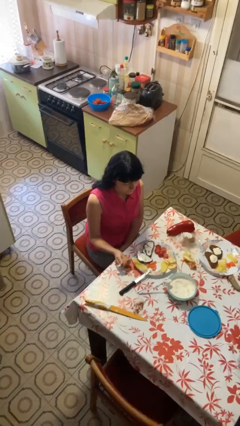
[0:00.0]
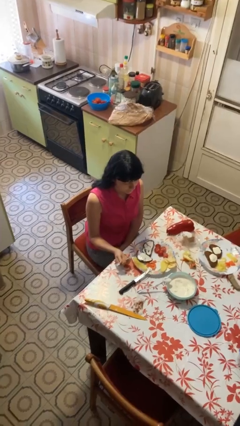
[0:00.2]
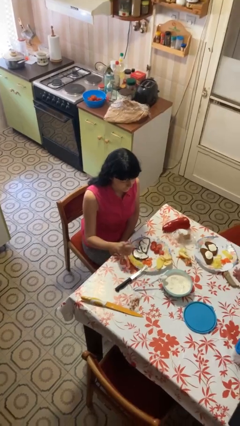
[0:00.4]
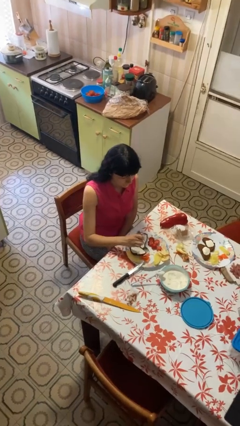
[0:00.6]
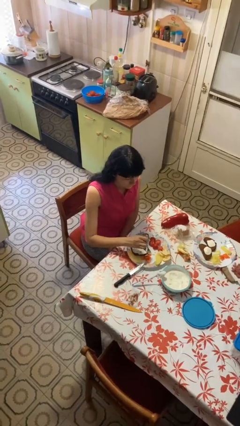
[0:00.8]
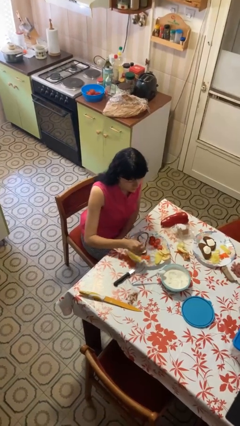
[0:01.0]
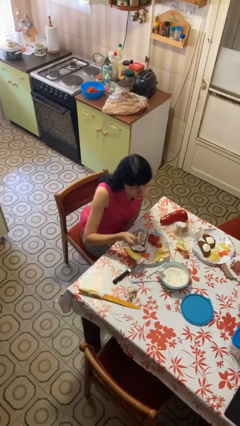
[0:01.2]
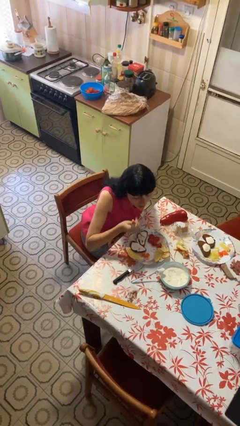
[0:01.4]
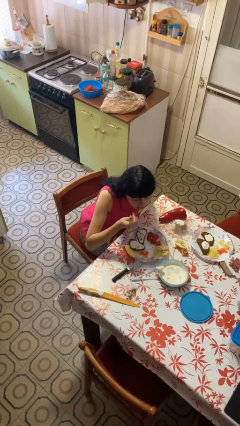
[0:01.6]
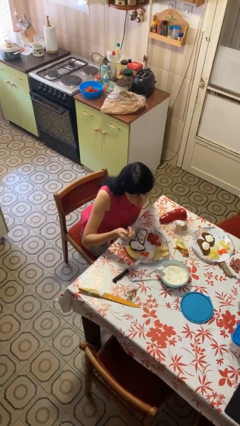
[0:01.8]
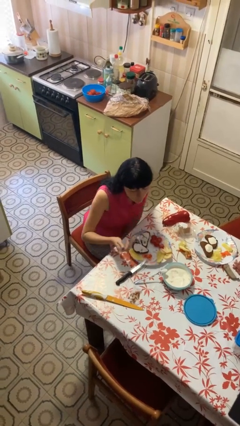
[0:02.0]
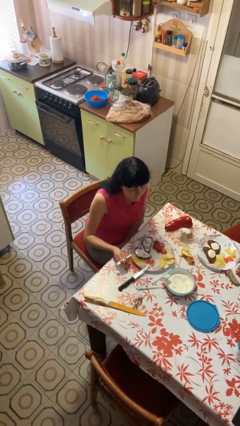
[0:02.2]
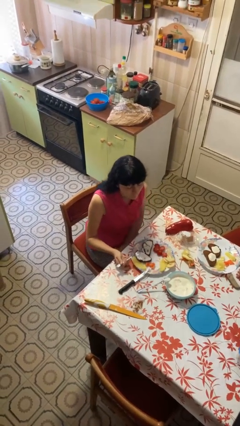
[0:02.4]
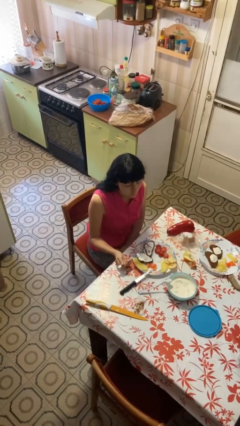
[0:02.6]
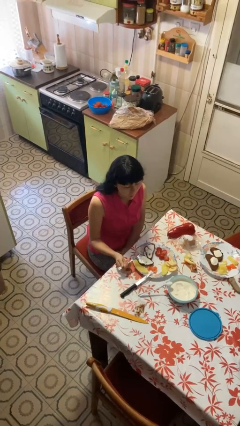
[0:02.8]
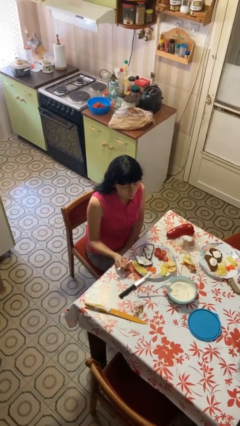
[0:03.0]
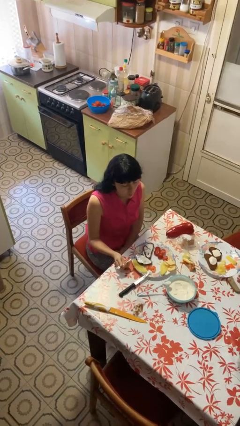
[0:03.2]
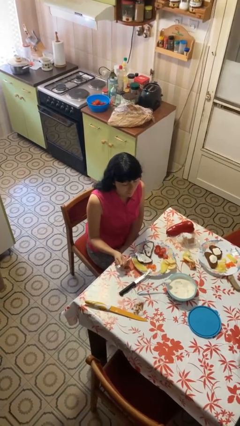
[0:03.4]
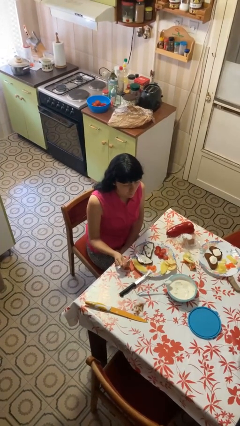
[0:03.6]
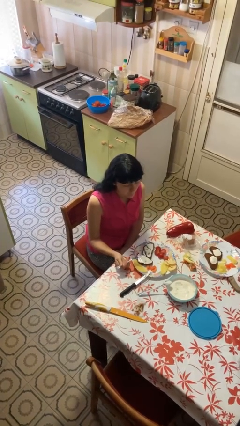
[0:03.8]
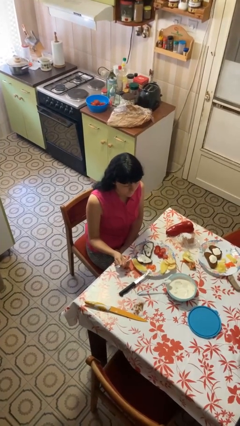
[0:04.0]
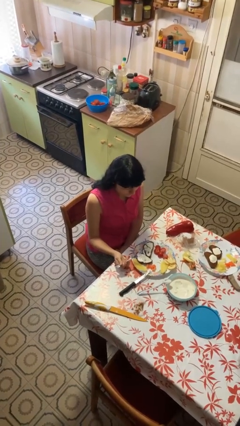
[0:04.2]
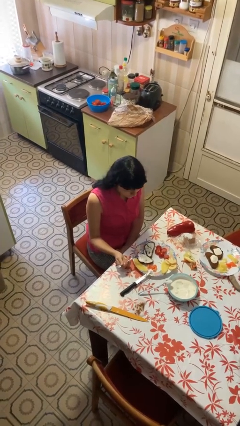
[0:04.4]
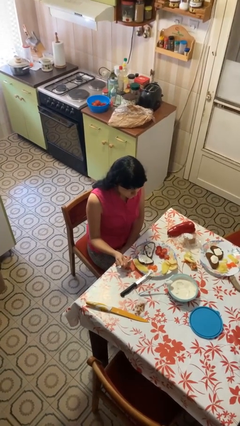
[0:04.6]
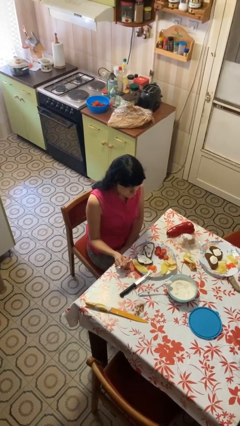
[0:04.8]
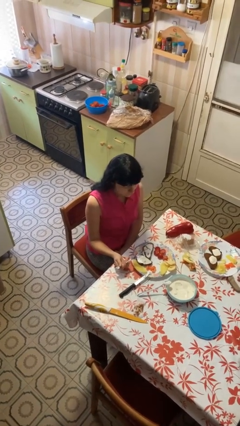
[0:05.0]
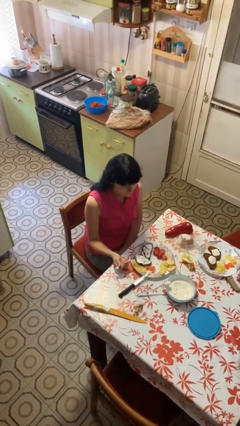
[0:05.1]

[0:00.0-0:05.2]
person eats with utensil

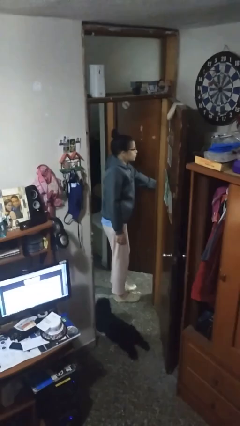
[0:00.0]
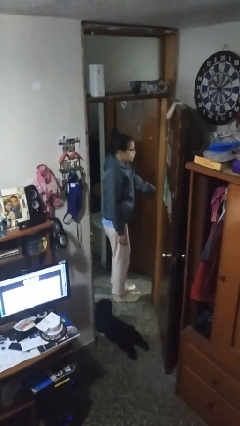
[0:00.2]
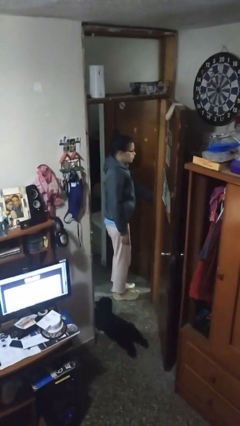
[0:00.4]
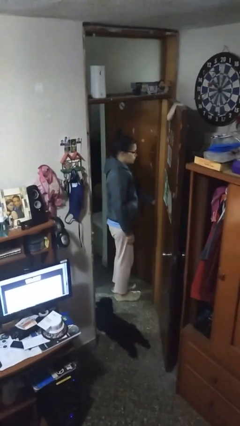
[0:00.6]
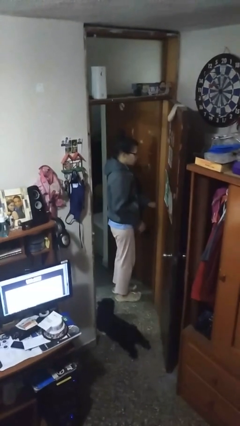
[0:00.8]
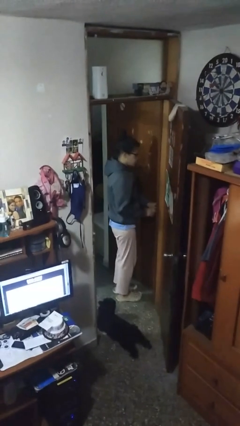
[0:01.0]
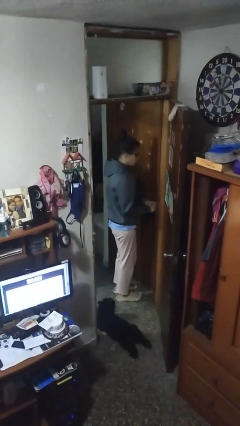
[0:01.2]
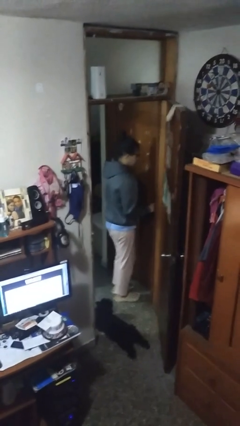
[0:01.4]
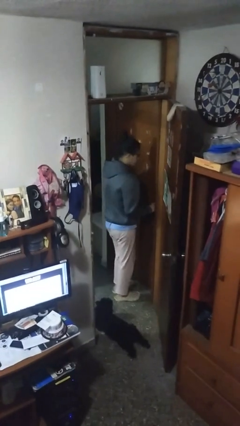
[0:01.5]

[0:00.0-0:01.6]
person closes facility door

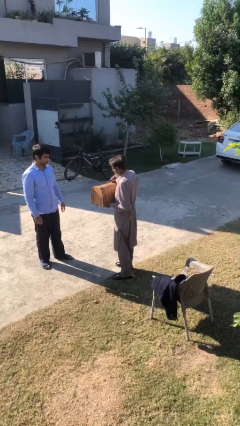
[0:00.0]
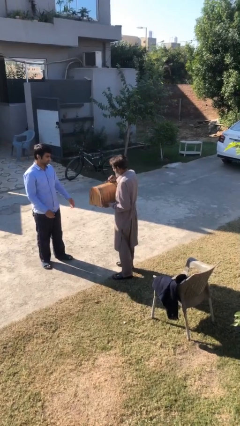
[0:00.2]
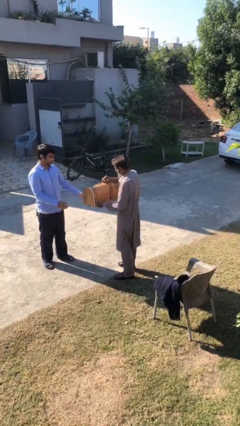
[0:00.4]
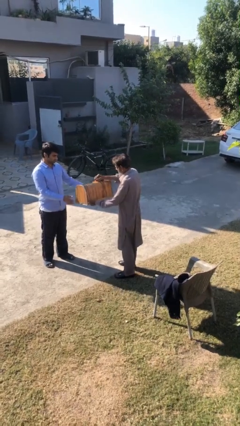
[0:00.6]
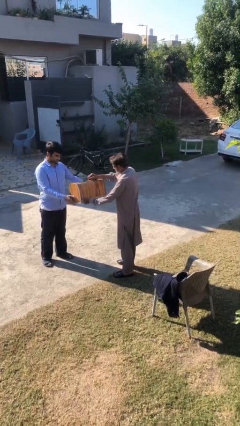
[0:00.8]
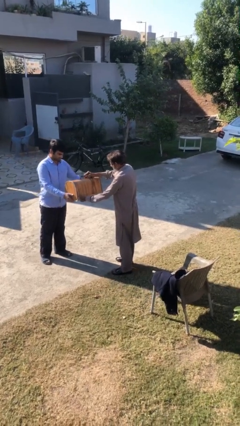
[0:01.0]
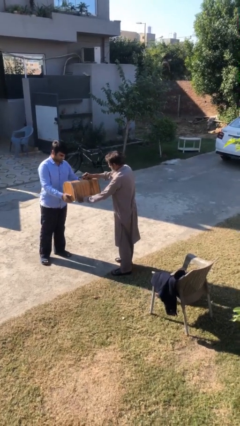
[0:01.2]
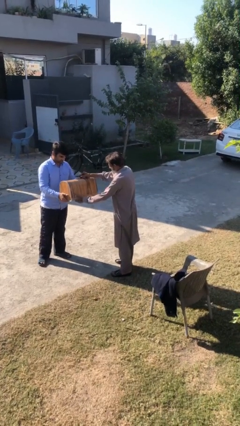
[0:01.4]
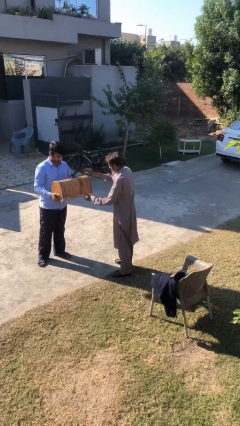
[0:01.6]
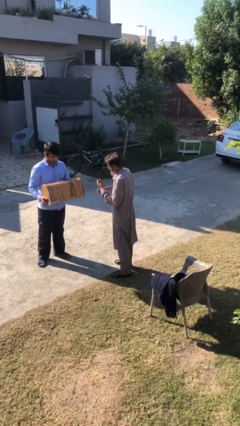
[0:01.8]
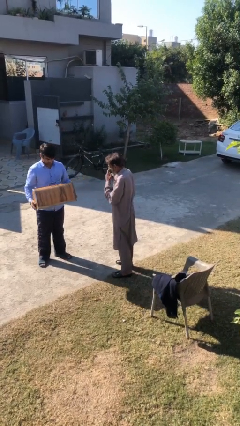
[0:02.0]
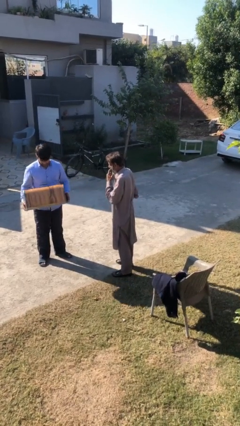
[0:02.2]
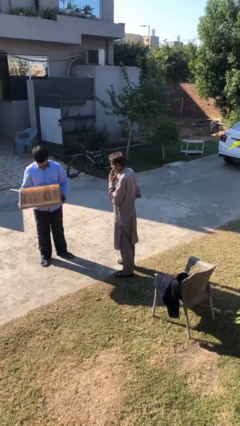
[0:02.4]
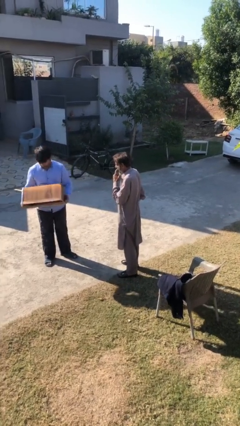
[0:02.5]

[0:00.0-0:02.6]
person transfers object to person

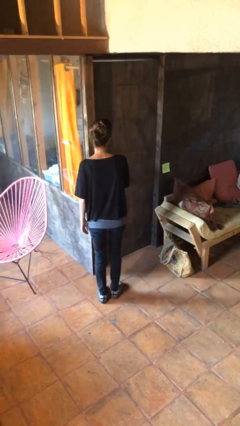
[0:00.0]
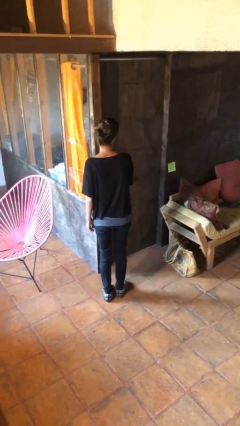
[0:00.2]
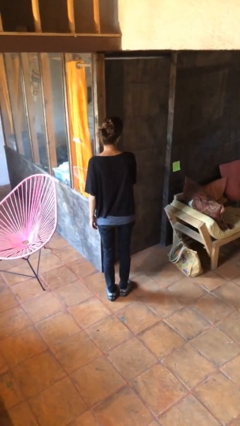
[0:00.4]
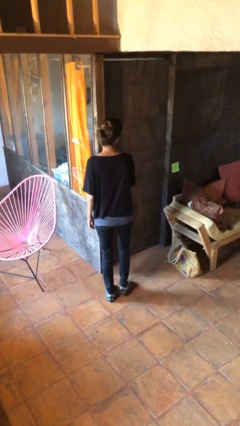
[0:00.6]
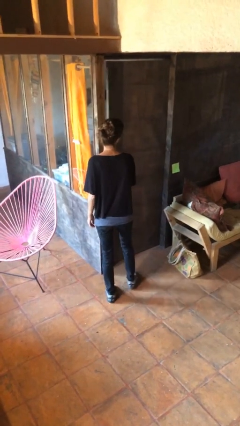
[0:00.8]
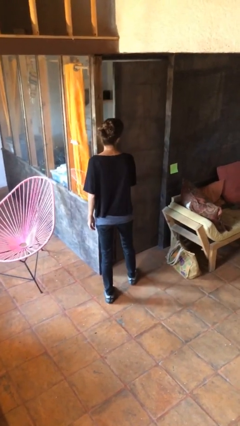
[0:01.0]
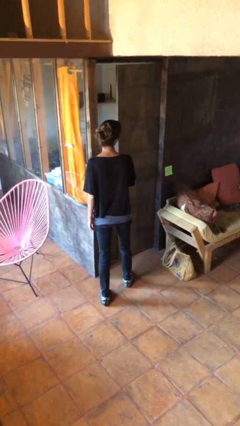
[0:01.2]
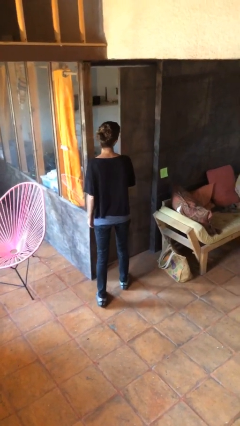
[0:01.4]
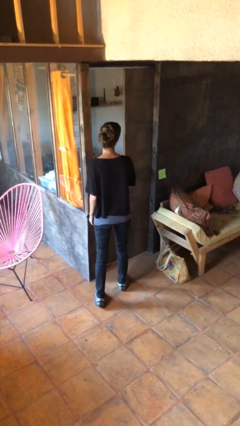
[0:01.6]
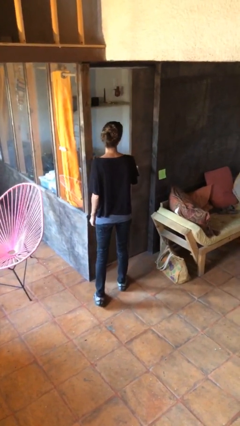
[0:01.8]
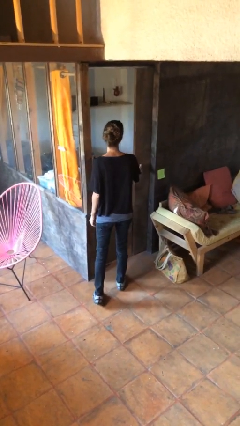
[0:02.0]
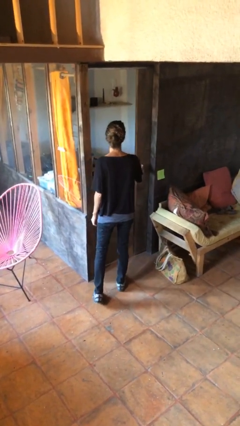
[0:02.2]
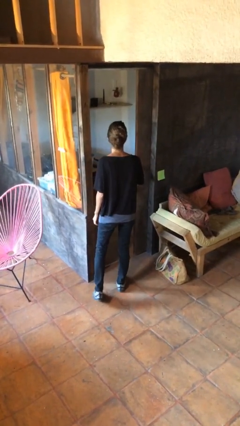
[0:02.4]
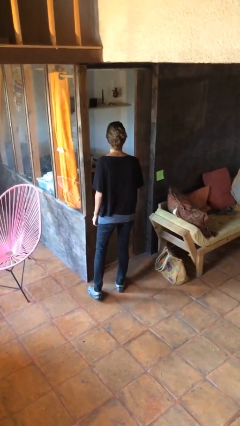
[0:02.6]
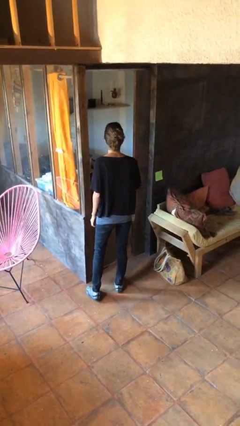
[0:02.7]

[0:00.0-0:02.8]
person opens sliding door

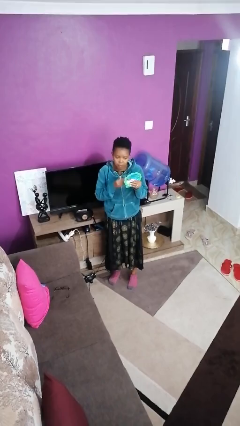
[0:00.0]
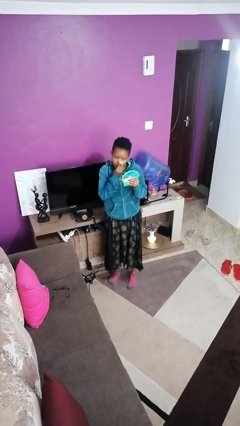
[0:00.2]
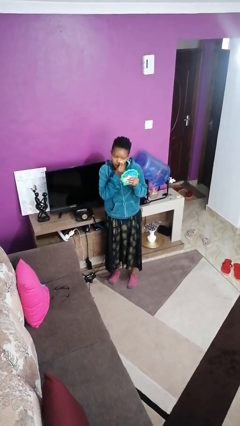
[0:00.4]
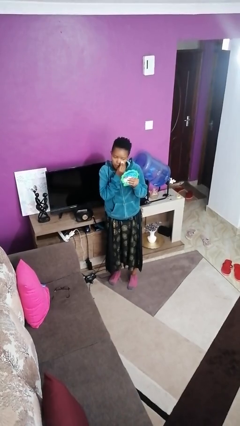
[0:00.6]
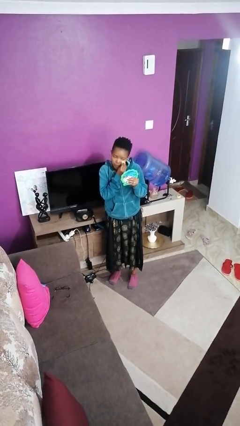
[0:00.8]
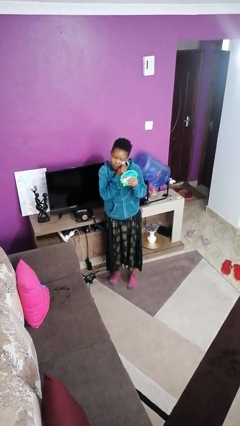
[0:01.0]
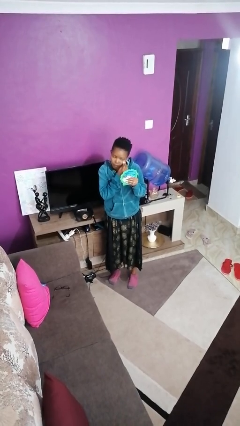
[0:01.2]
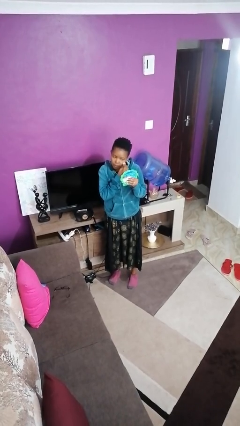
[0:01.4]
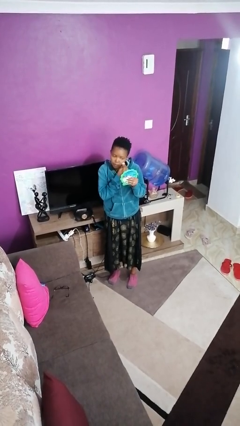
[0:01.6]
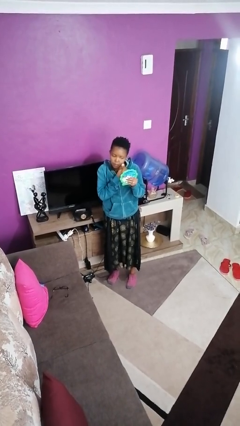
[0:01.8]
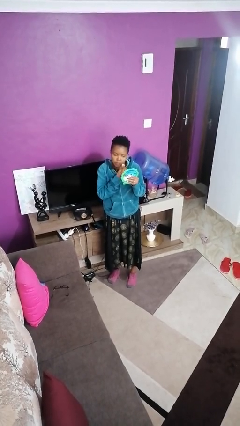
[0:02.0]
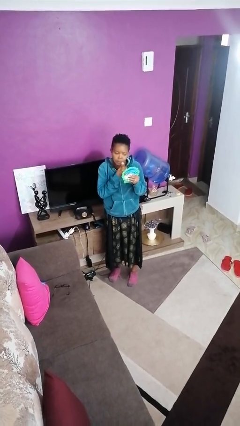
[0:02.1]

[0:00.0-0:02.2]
person applies foundation makeup

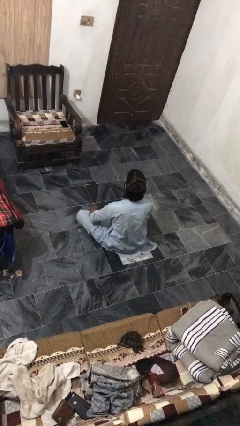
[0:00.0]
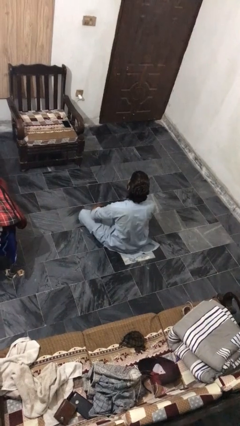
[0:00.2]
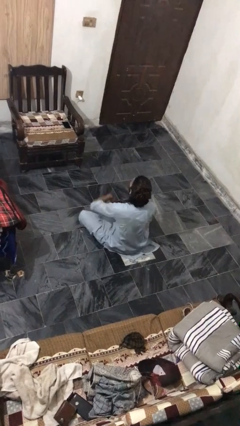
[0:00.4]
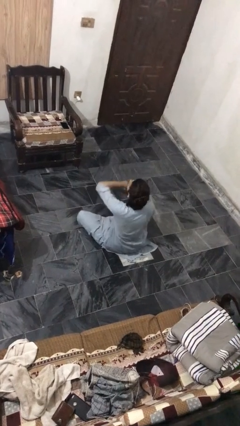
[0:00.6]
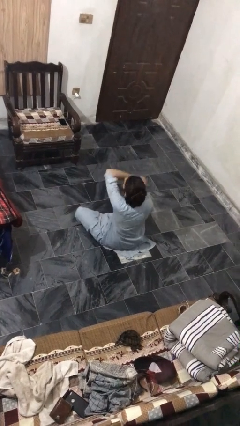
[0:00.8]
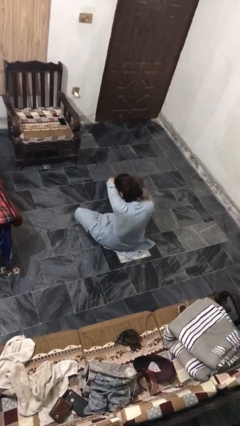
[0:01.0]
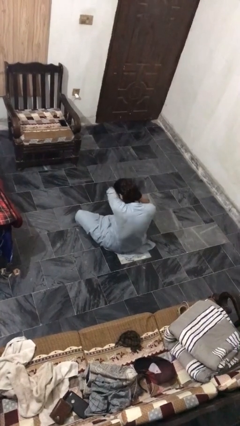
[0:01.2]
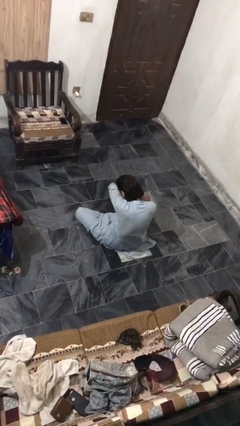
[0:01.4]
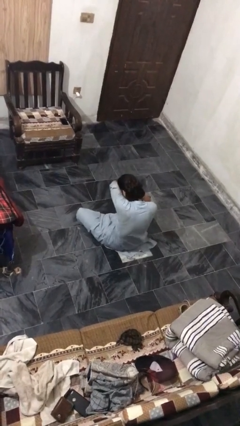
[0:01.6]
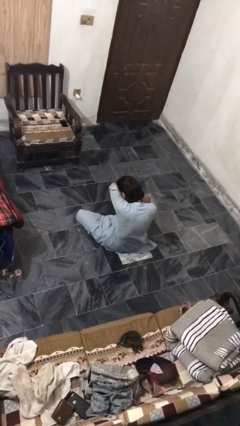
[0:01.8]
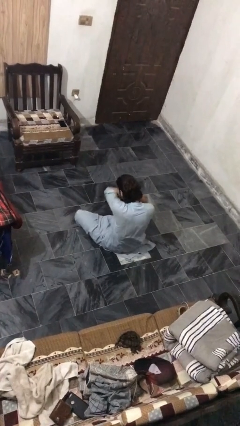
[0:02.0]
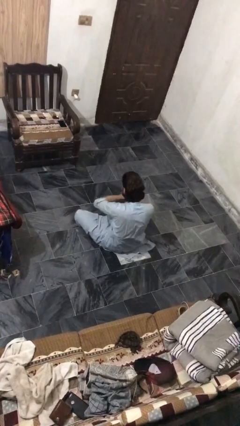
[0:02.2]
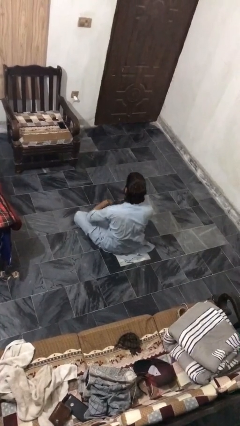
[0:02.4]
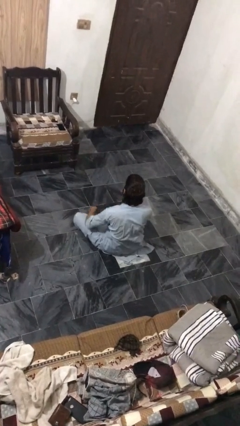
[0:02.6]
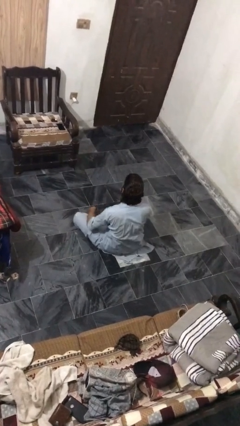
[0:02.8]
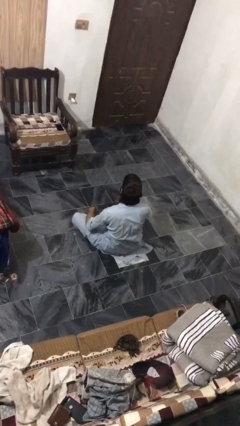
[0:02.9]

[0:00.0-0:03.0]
person sneezes into arm
